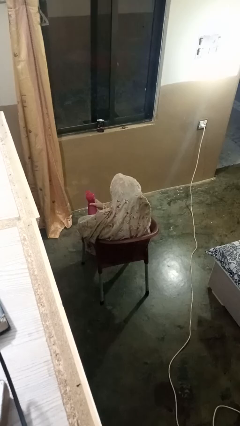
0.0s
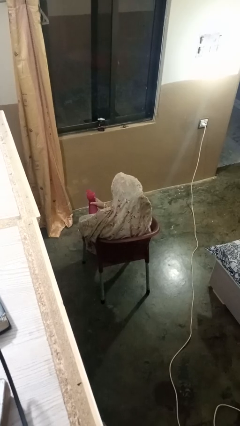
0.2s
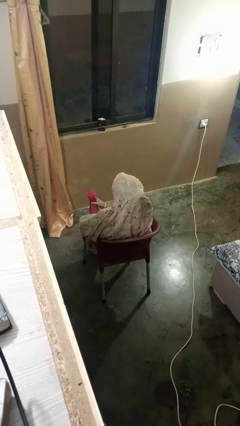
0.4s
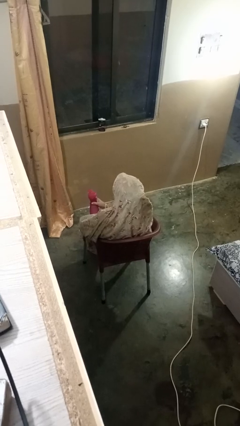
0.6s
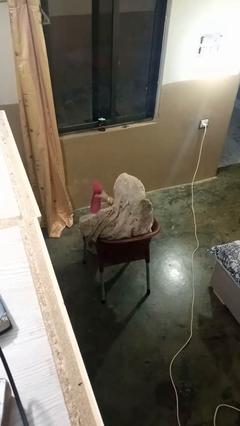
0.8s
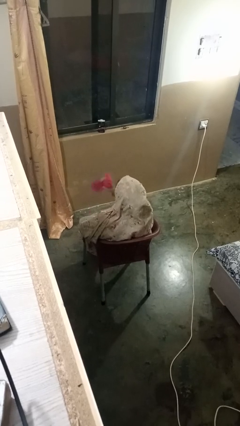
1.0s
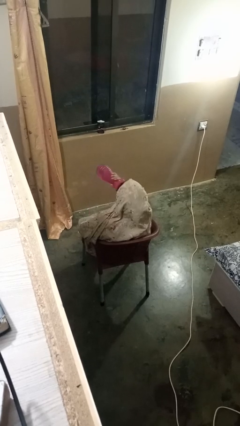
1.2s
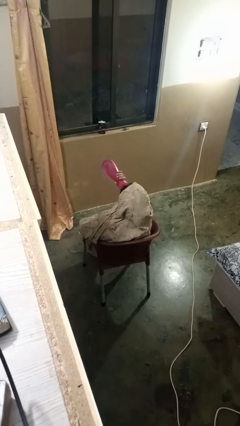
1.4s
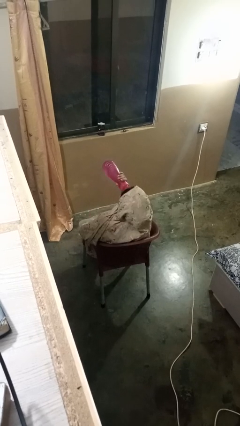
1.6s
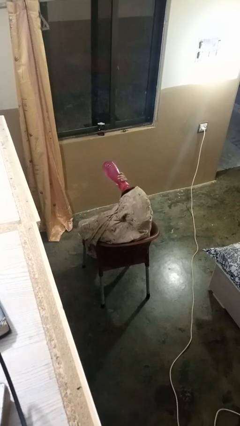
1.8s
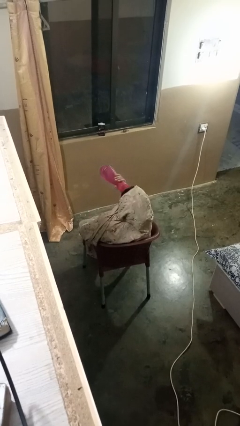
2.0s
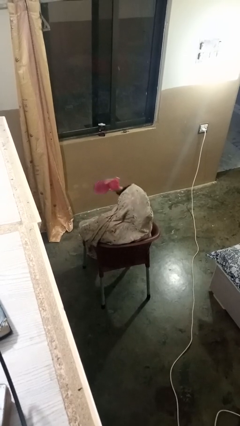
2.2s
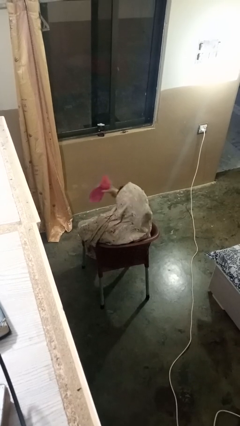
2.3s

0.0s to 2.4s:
person drinks from bottle

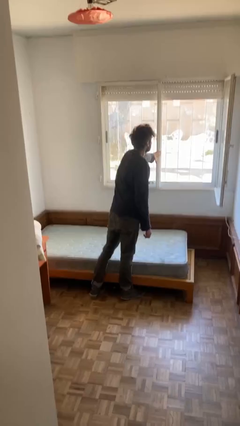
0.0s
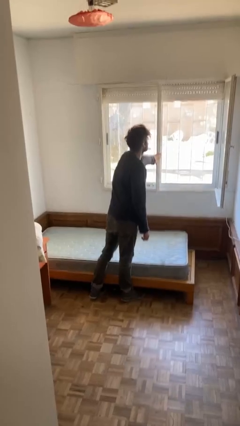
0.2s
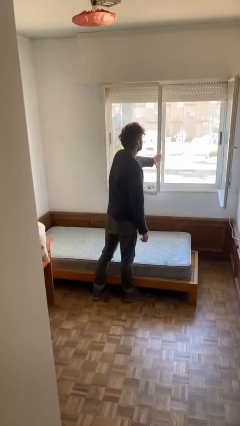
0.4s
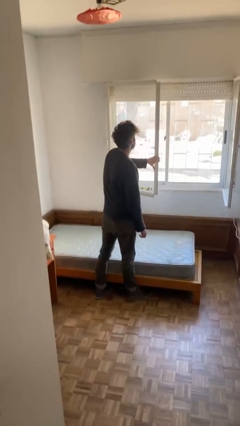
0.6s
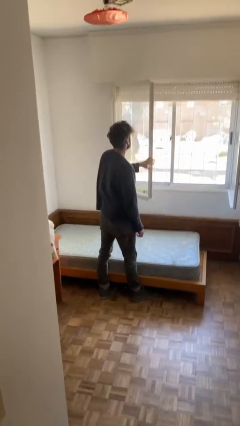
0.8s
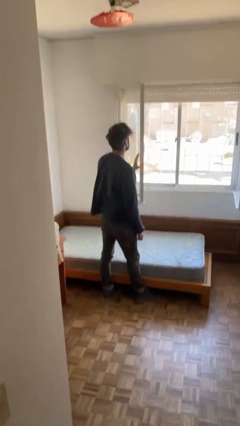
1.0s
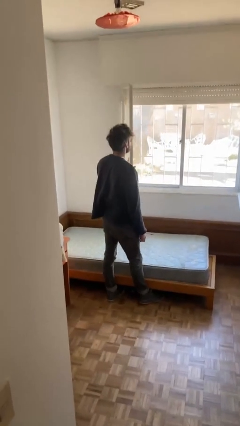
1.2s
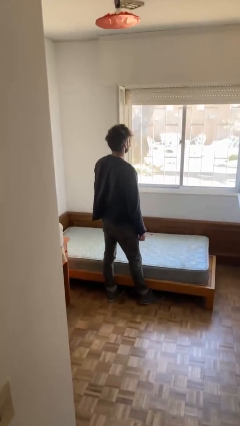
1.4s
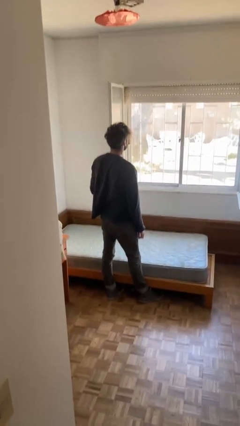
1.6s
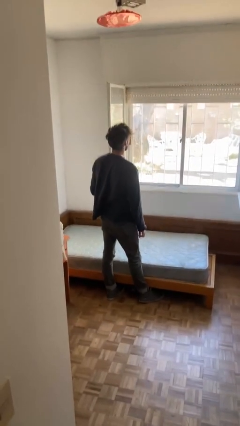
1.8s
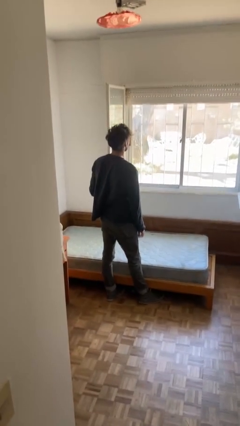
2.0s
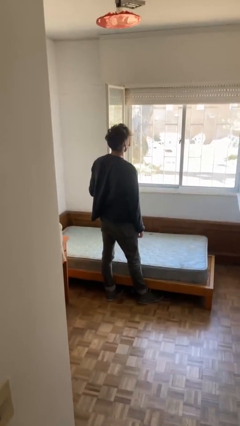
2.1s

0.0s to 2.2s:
person opens home window

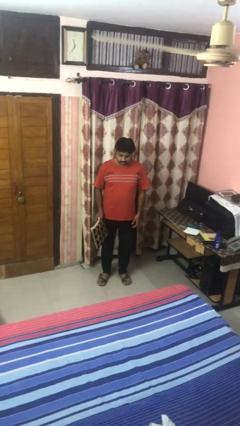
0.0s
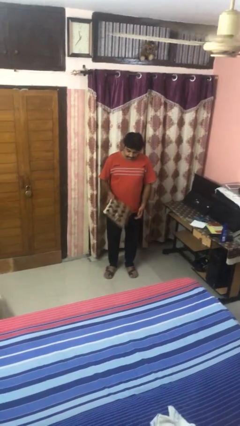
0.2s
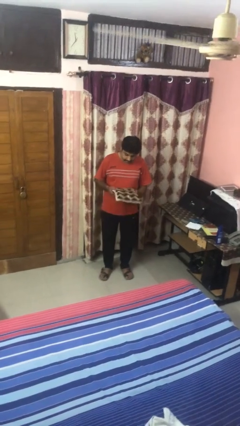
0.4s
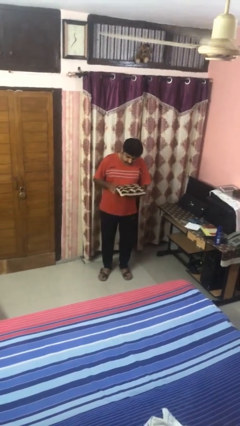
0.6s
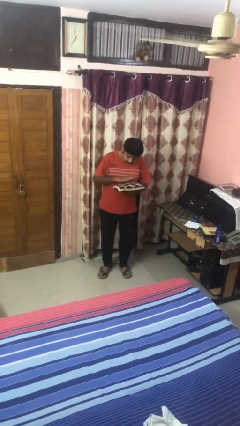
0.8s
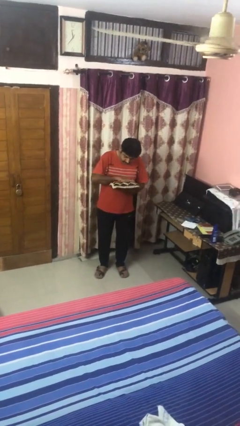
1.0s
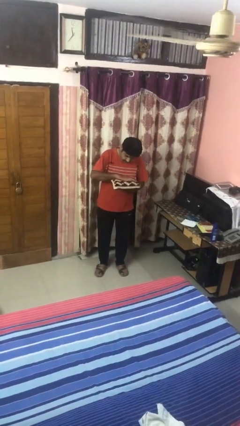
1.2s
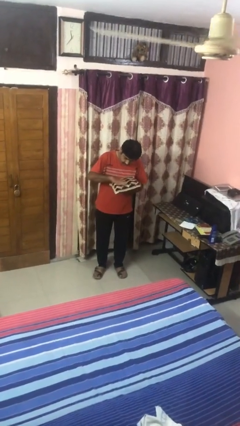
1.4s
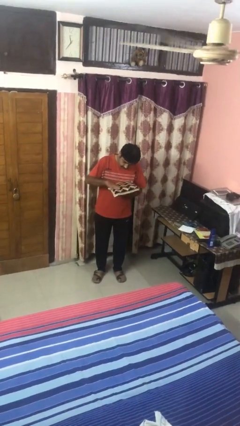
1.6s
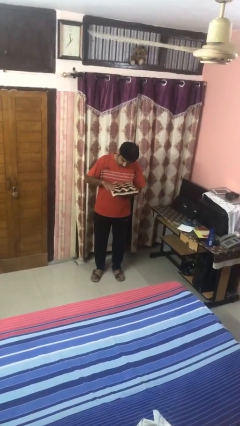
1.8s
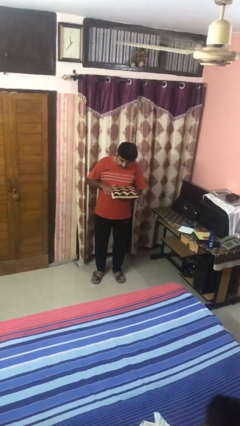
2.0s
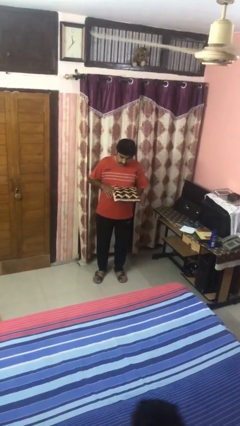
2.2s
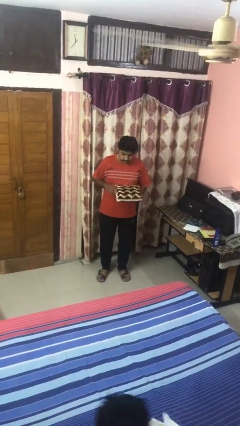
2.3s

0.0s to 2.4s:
person waves hand over object

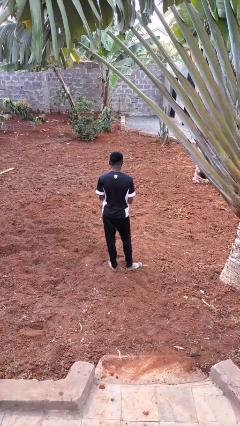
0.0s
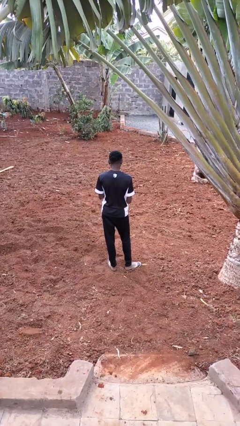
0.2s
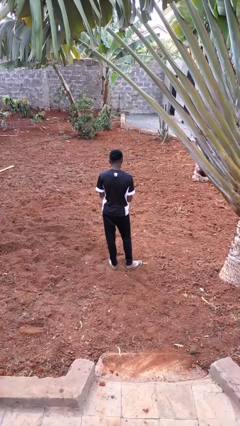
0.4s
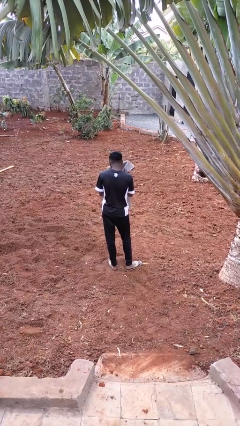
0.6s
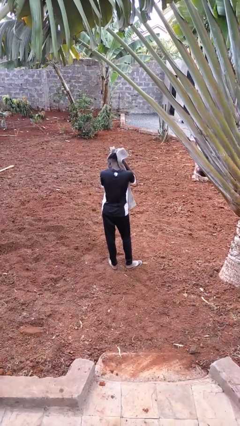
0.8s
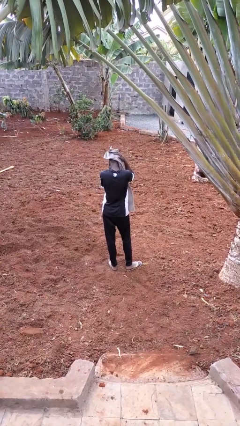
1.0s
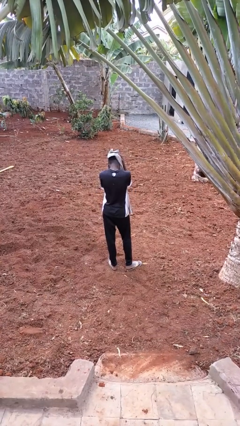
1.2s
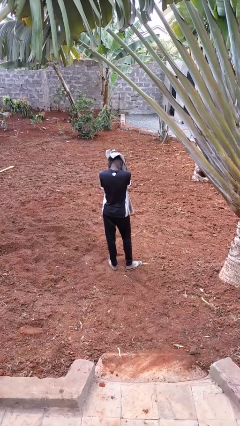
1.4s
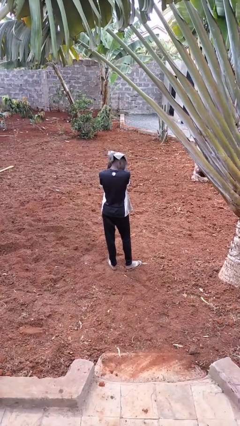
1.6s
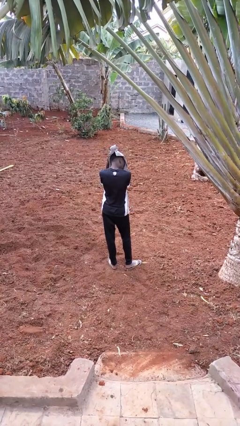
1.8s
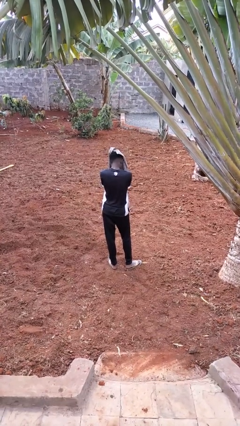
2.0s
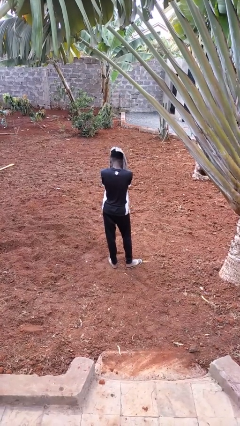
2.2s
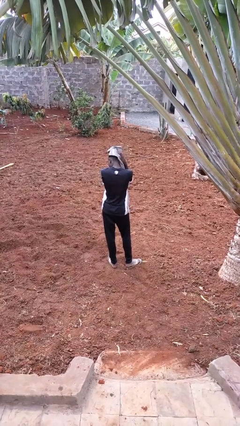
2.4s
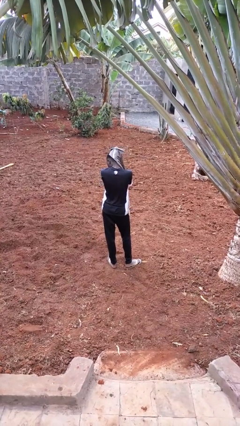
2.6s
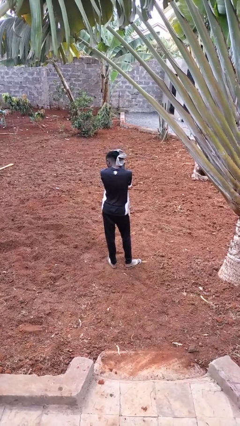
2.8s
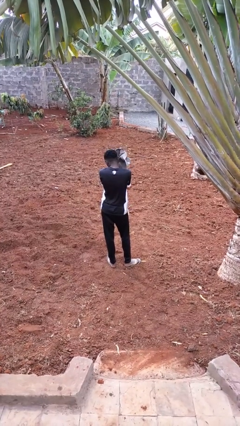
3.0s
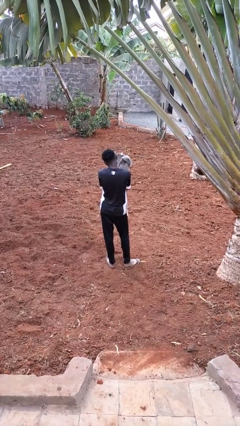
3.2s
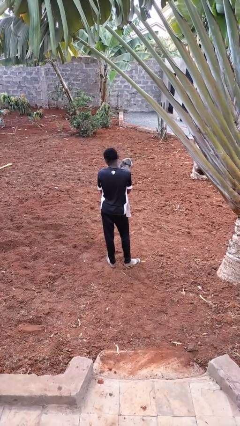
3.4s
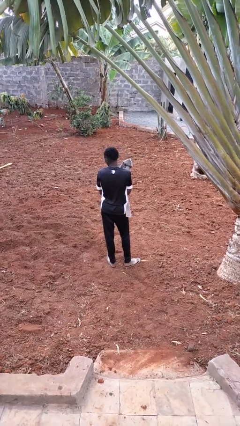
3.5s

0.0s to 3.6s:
person dries hair with towel

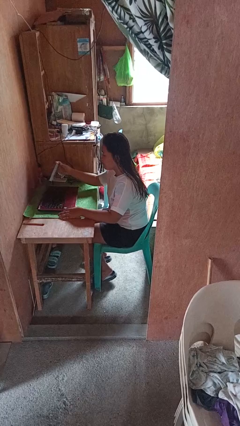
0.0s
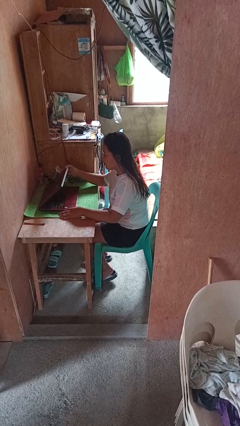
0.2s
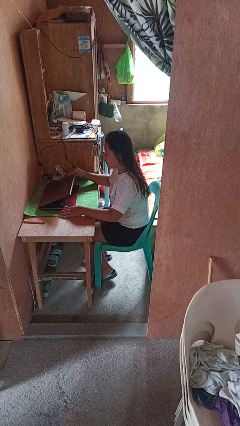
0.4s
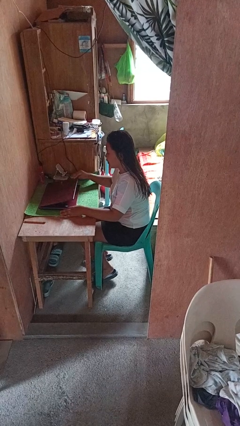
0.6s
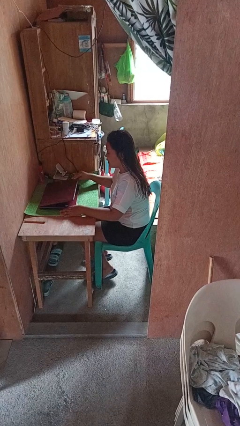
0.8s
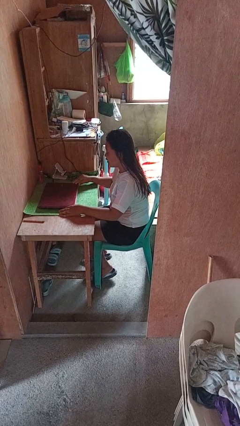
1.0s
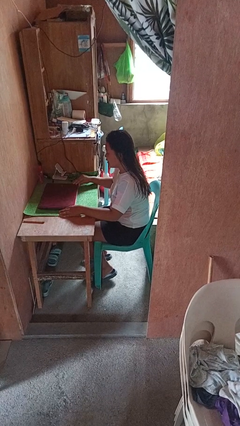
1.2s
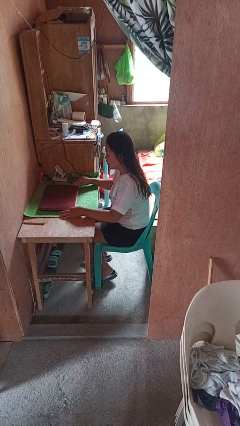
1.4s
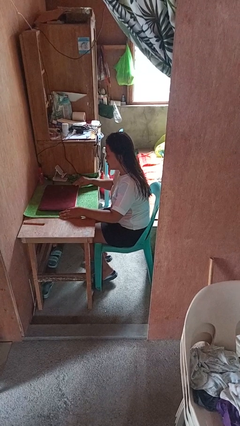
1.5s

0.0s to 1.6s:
person closes laptop

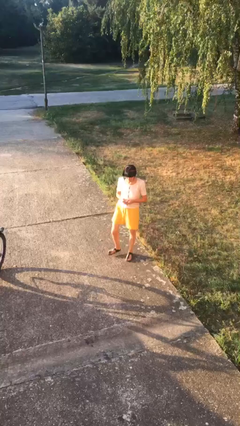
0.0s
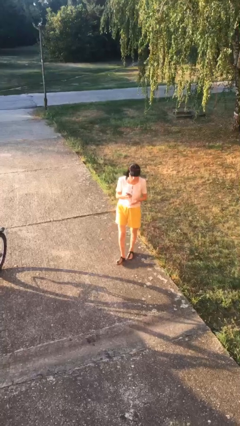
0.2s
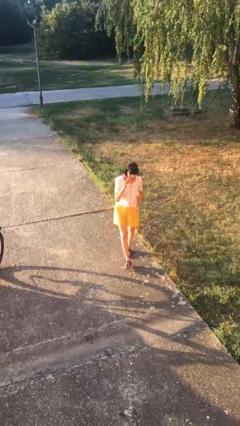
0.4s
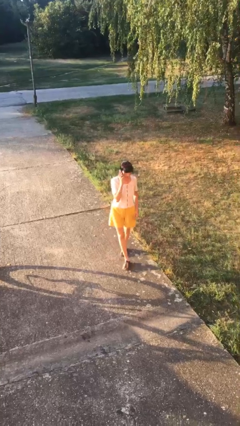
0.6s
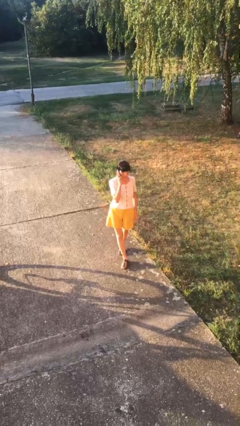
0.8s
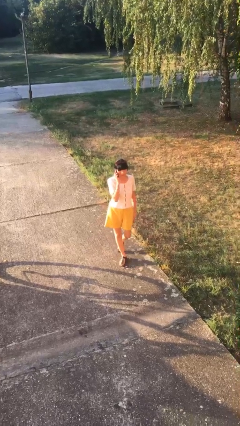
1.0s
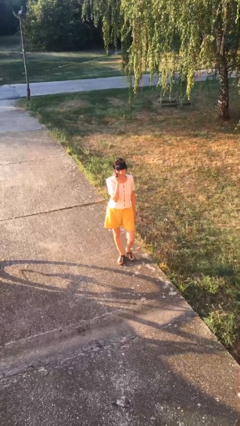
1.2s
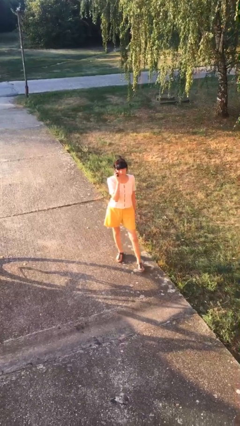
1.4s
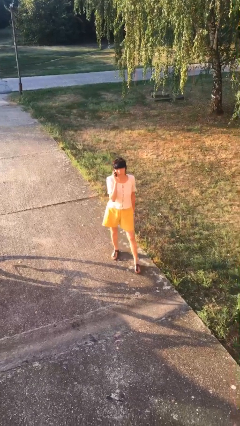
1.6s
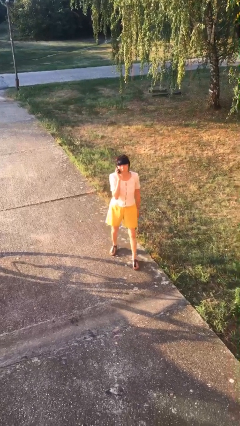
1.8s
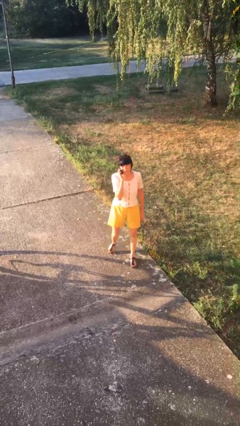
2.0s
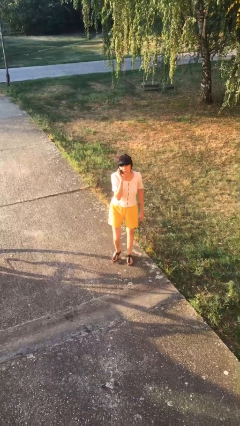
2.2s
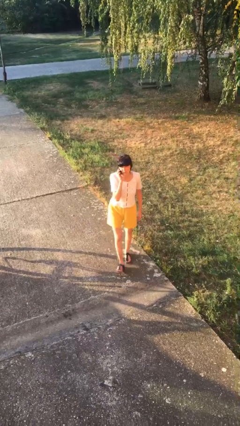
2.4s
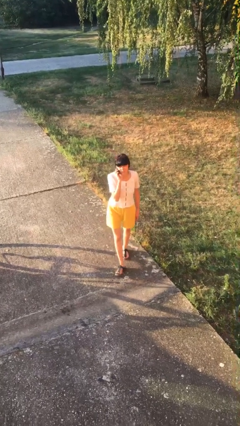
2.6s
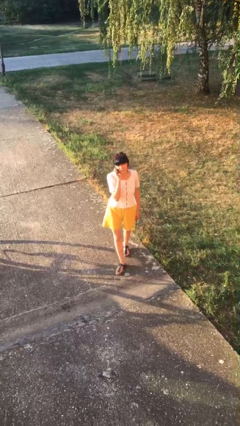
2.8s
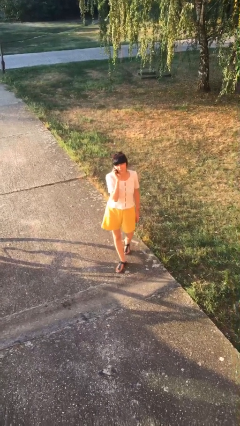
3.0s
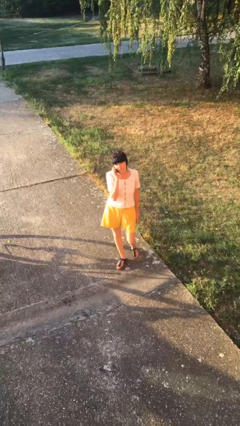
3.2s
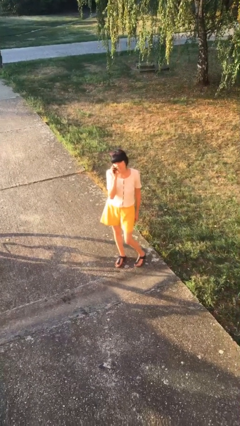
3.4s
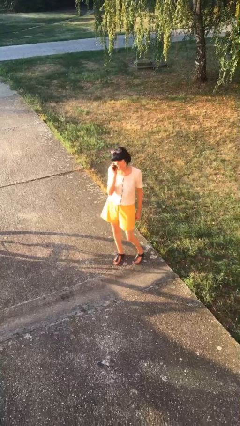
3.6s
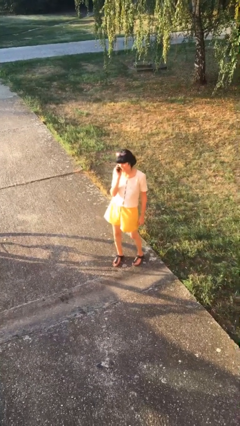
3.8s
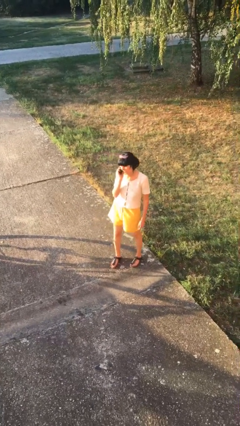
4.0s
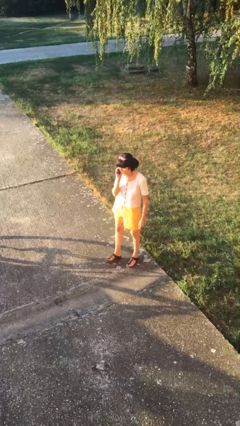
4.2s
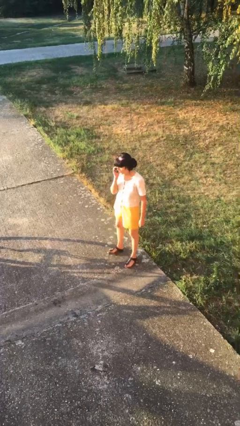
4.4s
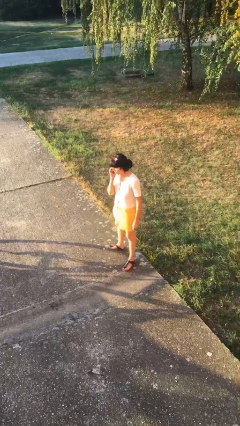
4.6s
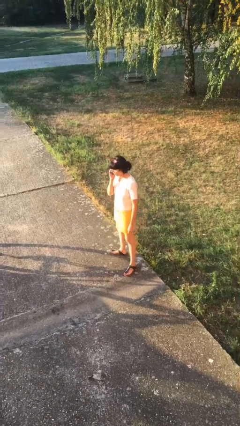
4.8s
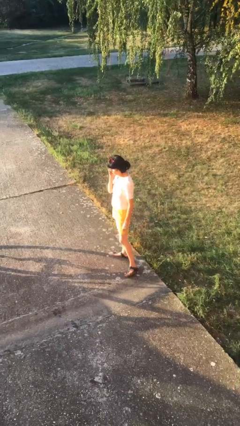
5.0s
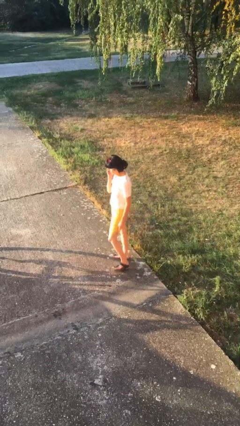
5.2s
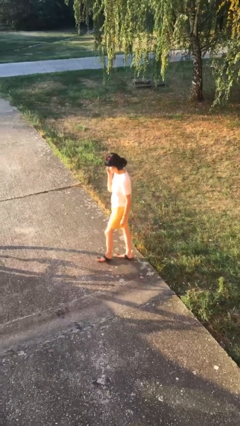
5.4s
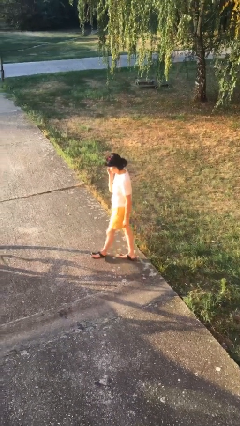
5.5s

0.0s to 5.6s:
person talks on phone
